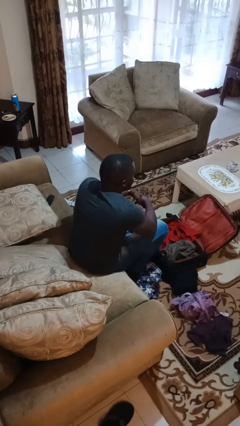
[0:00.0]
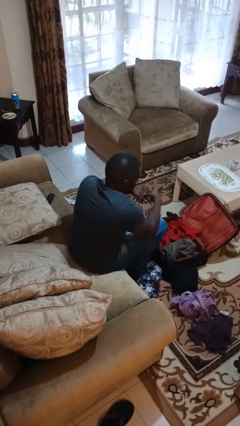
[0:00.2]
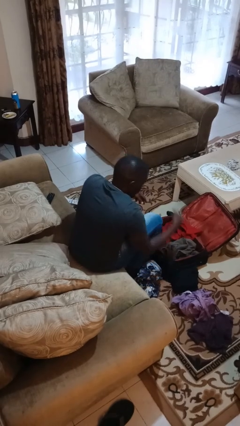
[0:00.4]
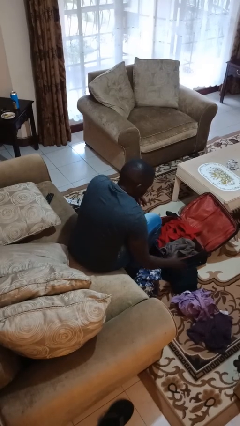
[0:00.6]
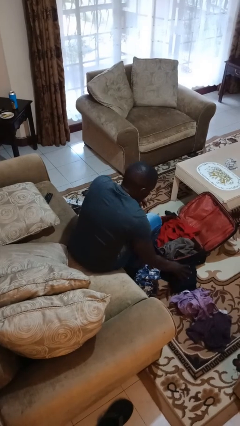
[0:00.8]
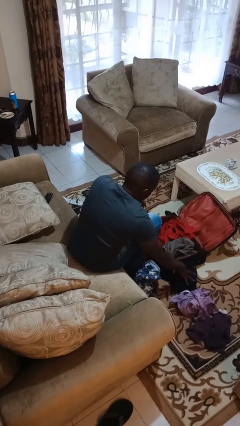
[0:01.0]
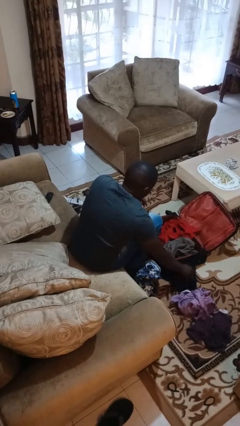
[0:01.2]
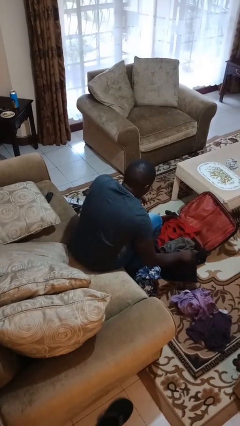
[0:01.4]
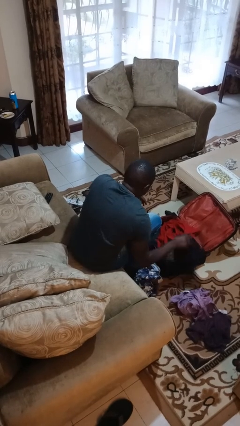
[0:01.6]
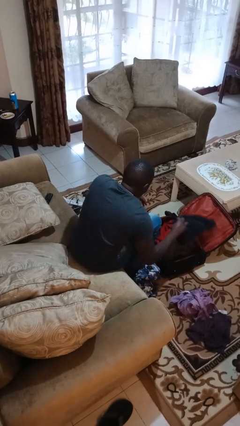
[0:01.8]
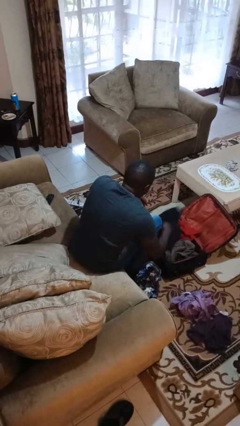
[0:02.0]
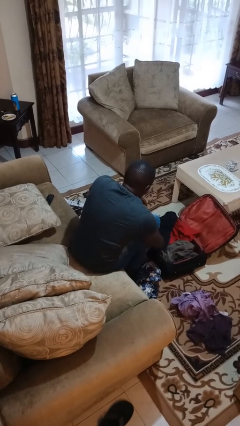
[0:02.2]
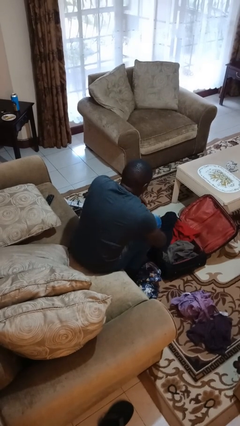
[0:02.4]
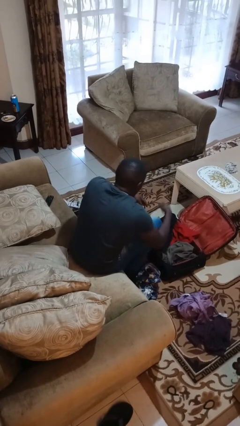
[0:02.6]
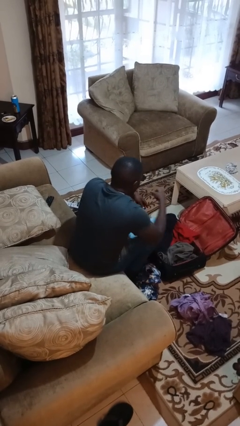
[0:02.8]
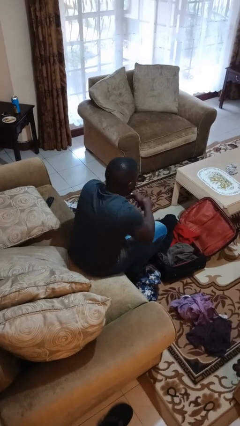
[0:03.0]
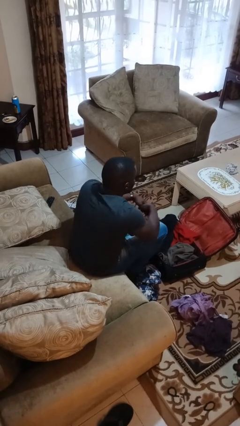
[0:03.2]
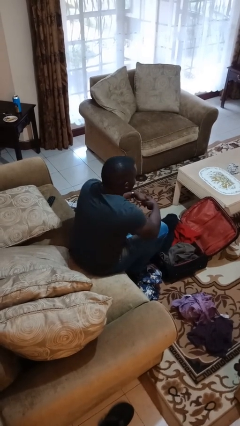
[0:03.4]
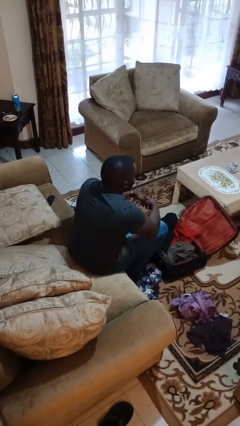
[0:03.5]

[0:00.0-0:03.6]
person loads clothes into suitcase

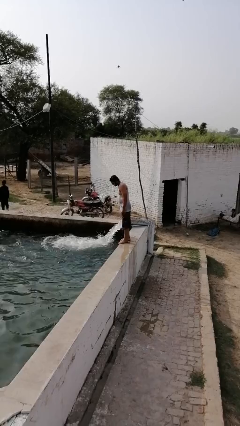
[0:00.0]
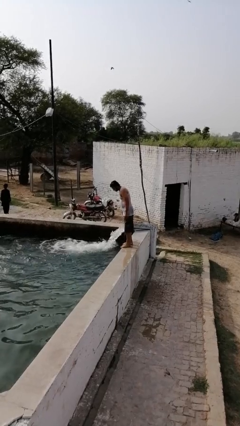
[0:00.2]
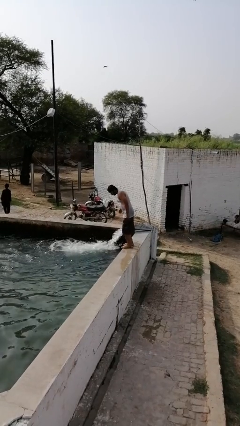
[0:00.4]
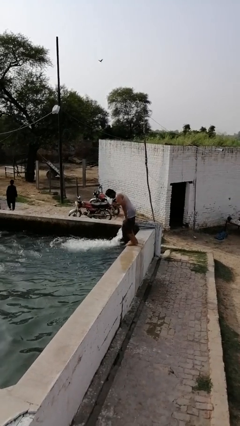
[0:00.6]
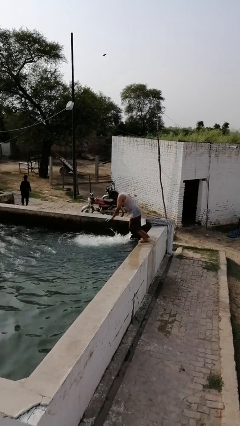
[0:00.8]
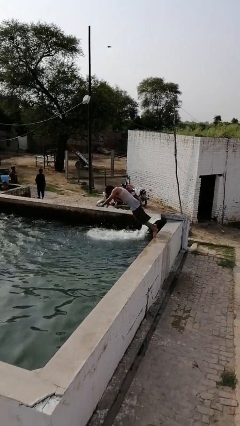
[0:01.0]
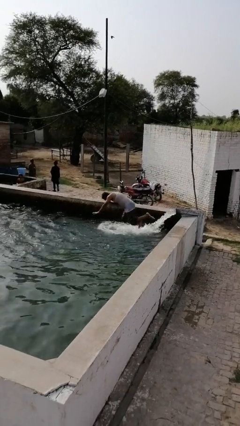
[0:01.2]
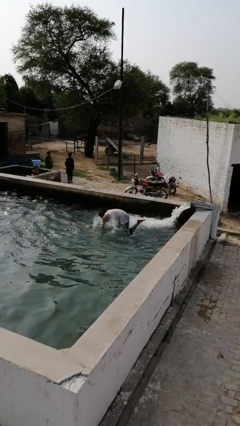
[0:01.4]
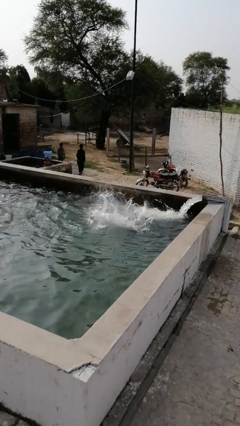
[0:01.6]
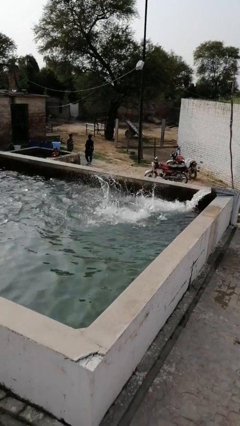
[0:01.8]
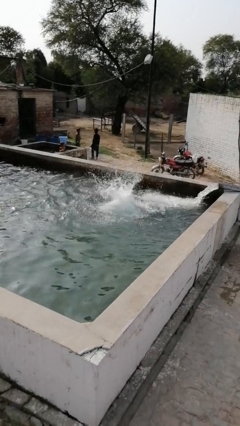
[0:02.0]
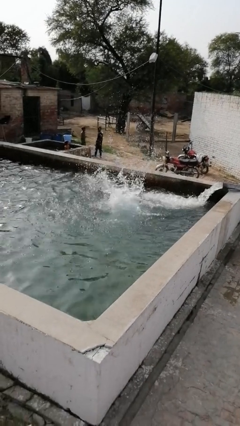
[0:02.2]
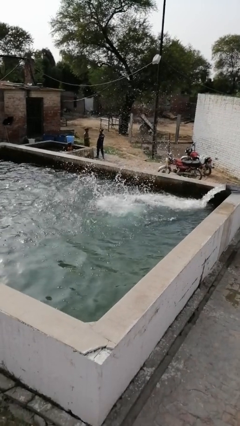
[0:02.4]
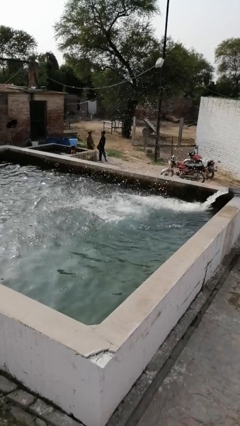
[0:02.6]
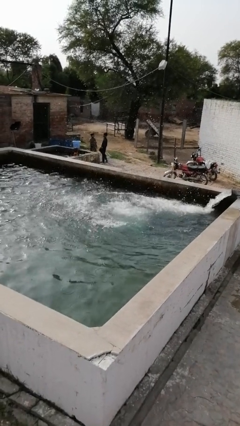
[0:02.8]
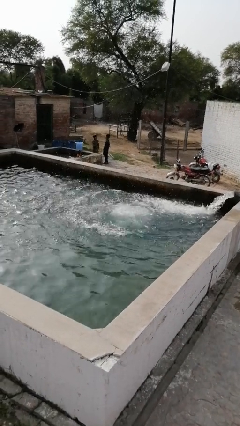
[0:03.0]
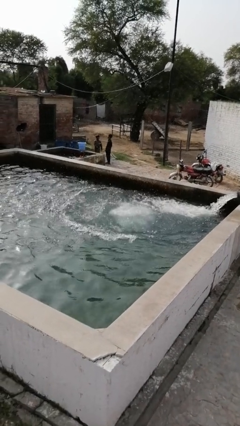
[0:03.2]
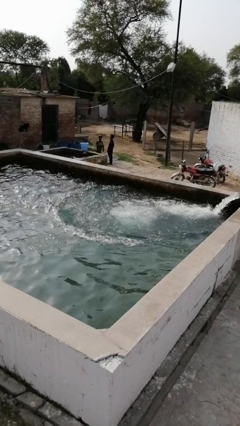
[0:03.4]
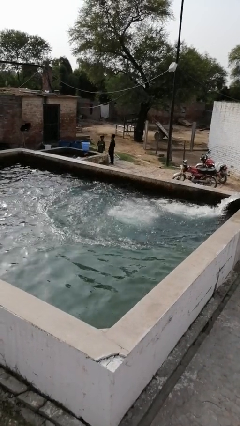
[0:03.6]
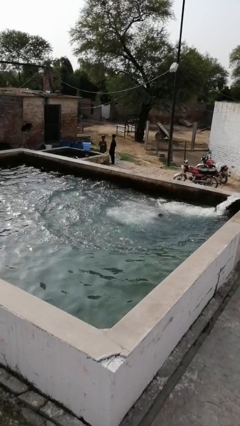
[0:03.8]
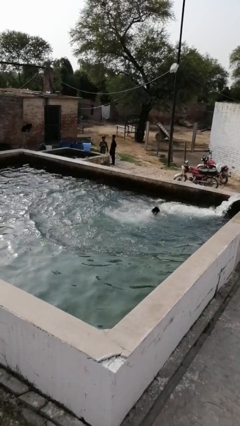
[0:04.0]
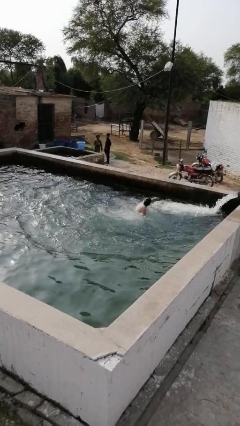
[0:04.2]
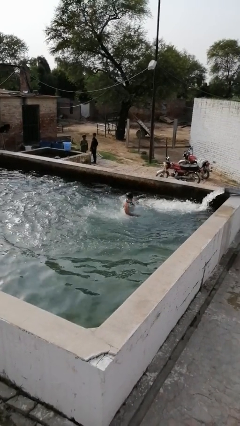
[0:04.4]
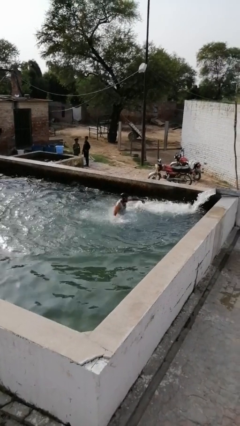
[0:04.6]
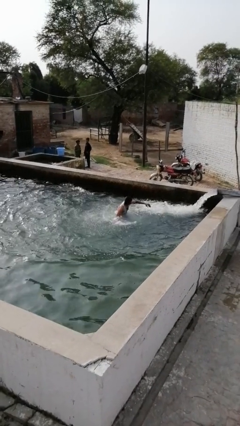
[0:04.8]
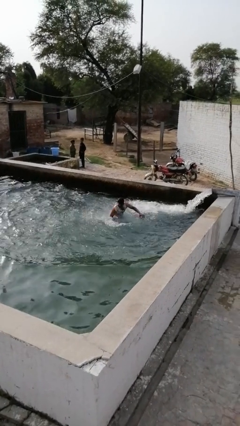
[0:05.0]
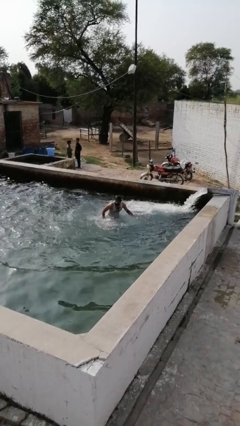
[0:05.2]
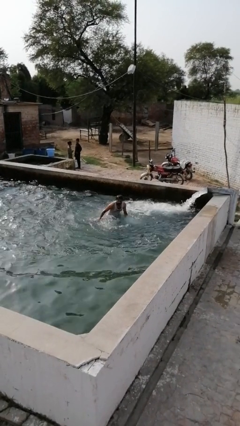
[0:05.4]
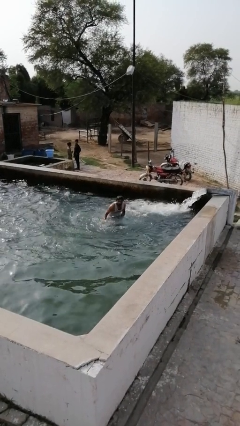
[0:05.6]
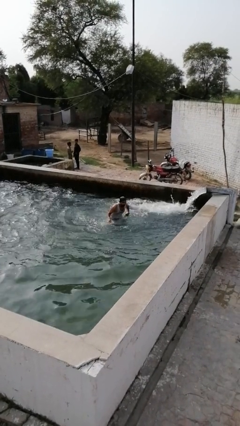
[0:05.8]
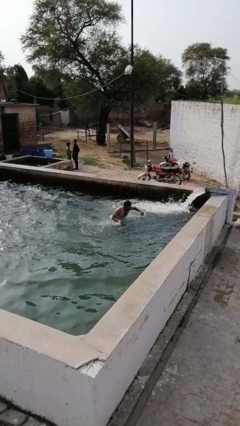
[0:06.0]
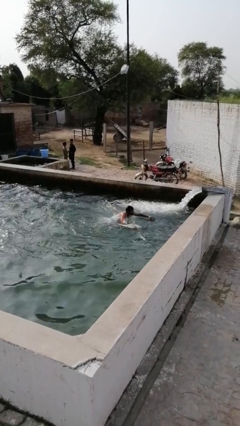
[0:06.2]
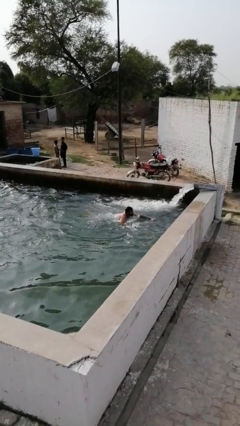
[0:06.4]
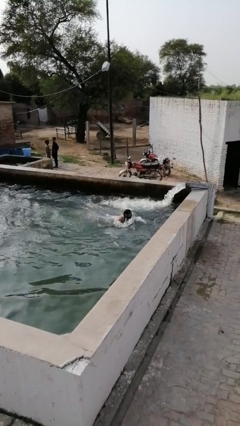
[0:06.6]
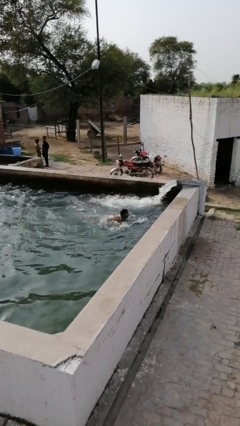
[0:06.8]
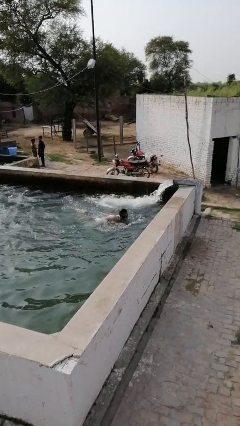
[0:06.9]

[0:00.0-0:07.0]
person jumps into pool

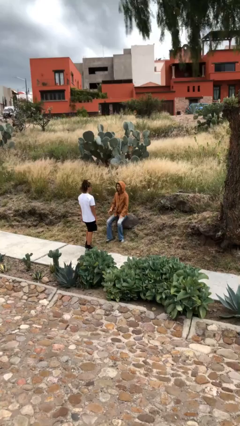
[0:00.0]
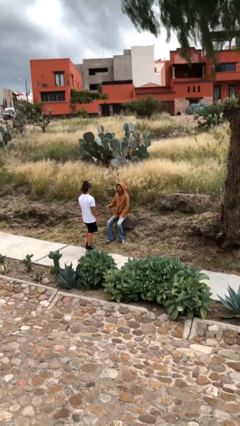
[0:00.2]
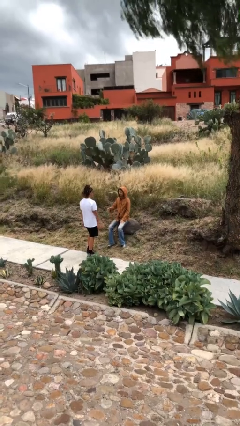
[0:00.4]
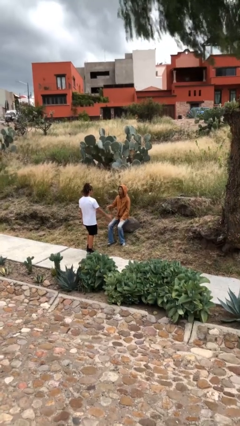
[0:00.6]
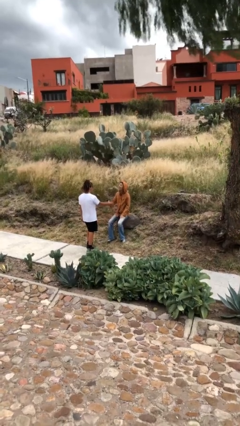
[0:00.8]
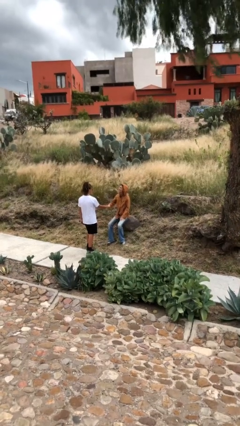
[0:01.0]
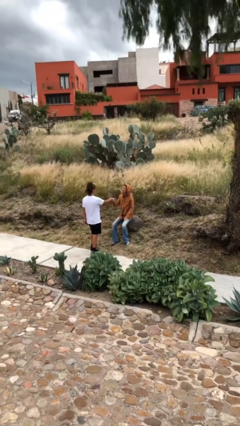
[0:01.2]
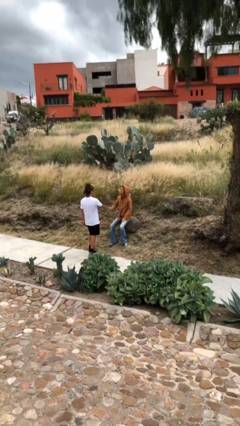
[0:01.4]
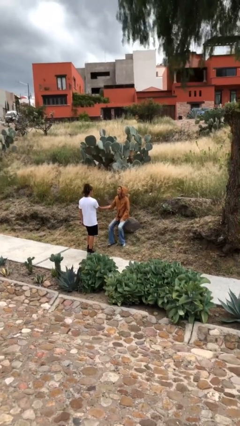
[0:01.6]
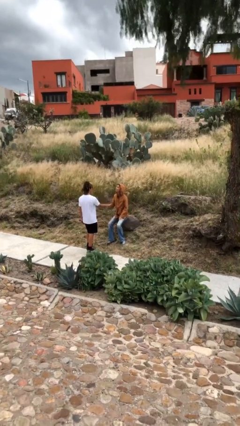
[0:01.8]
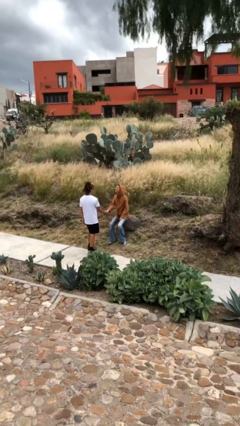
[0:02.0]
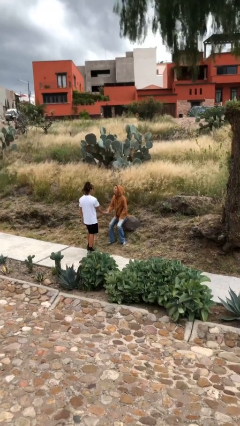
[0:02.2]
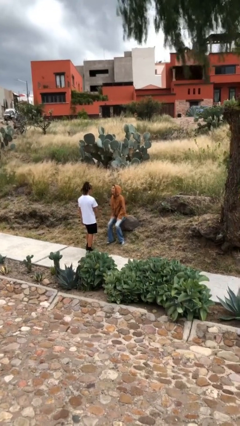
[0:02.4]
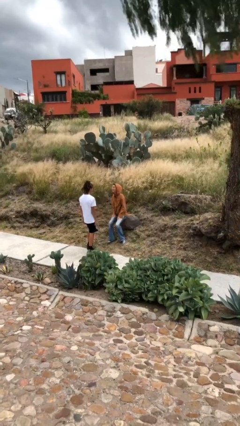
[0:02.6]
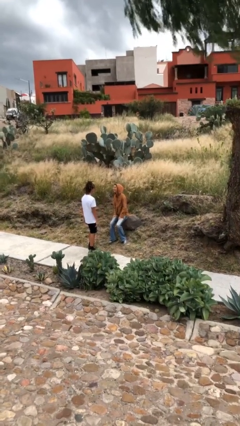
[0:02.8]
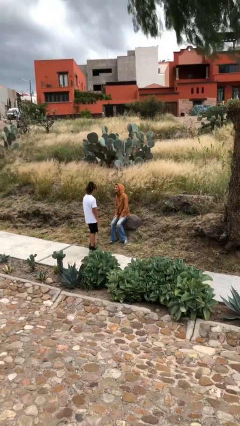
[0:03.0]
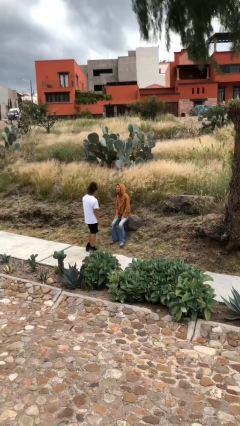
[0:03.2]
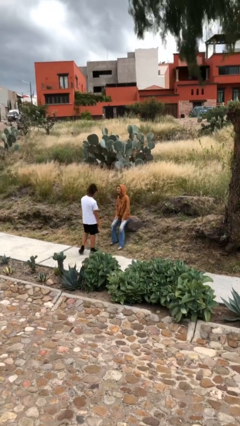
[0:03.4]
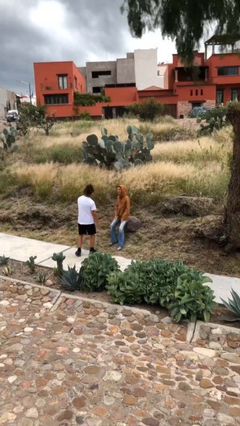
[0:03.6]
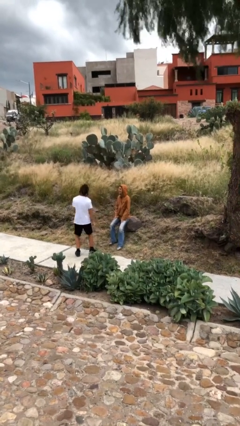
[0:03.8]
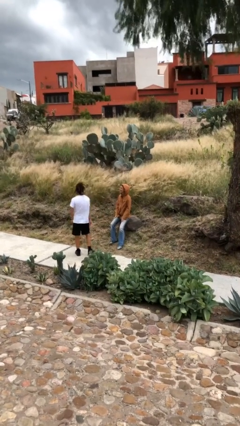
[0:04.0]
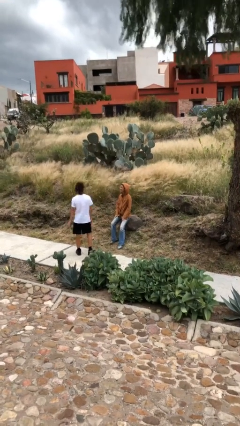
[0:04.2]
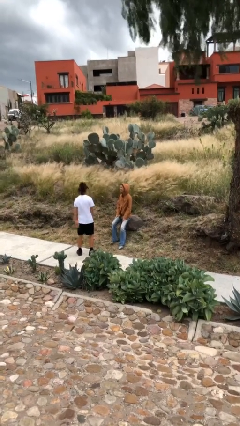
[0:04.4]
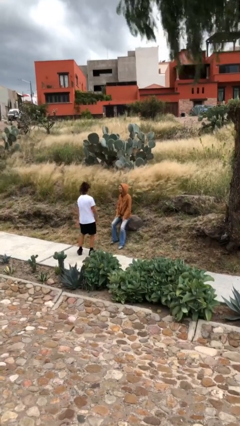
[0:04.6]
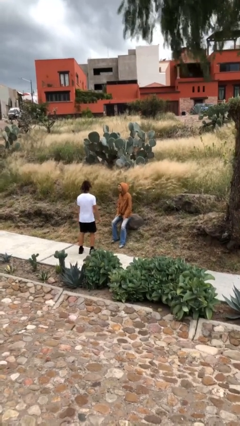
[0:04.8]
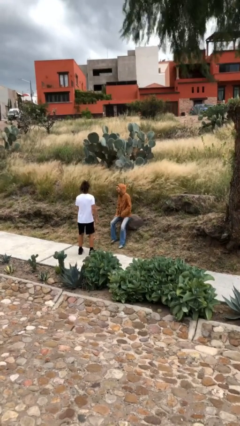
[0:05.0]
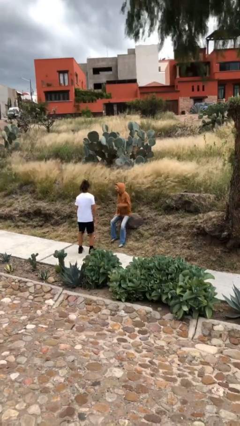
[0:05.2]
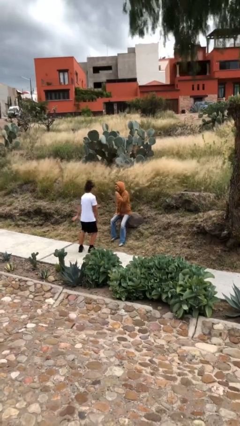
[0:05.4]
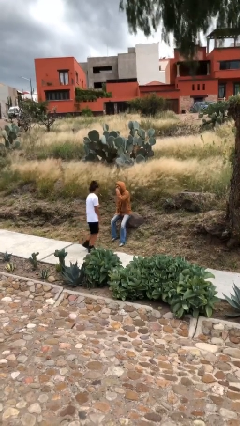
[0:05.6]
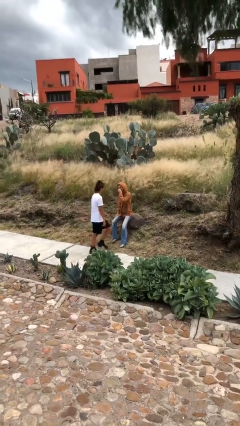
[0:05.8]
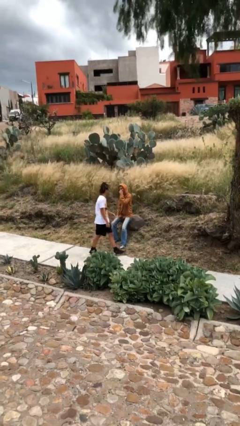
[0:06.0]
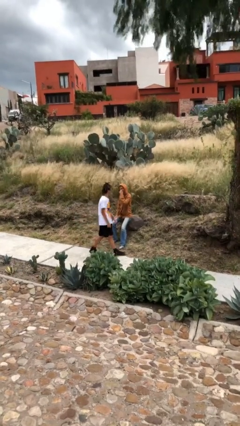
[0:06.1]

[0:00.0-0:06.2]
person shakes hand

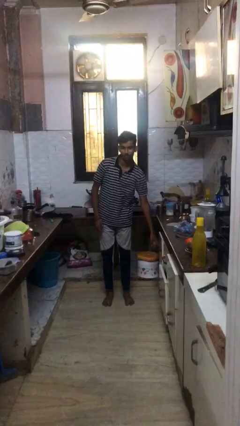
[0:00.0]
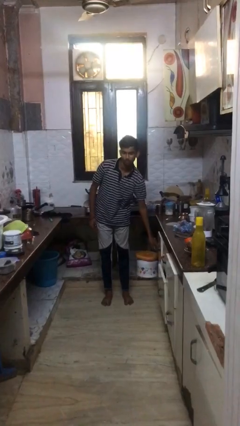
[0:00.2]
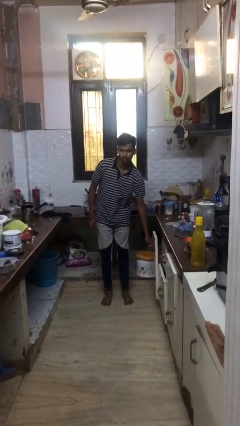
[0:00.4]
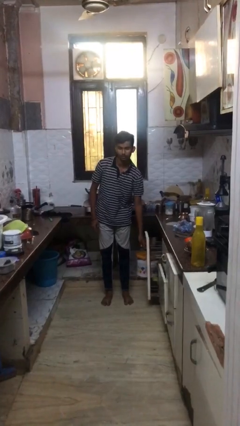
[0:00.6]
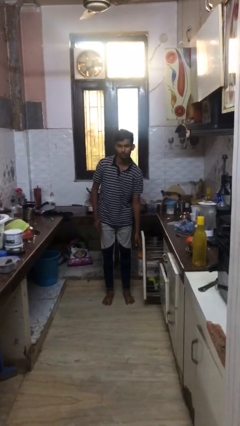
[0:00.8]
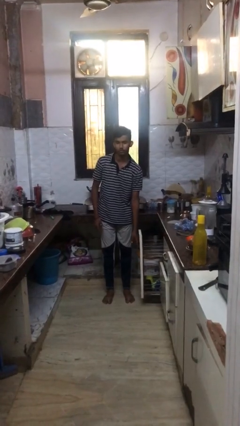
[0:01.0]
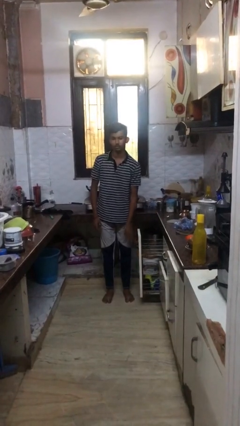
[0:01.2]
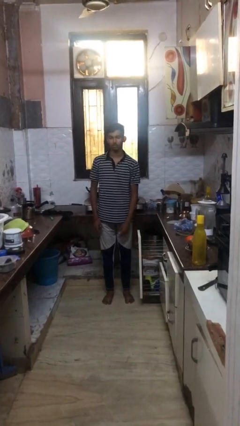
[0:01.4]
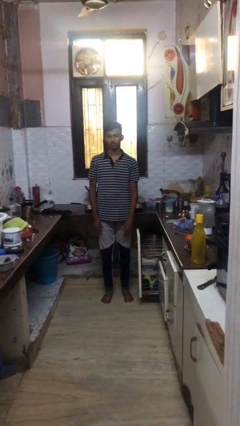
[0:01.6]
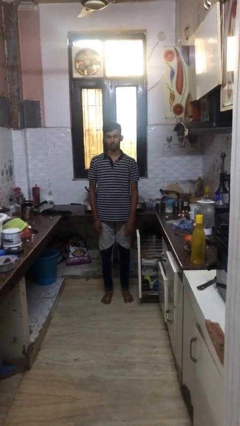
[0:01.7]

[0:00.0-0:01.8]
person opens dishwasher
